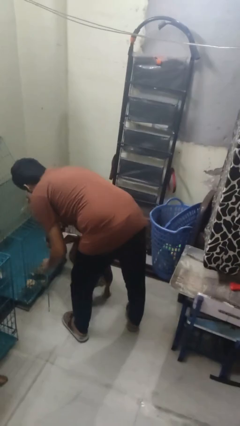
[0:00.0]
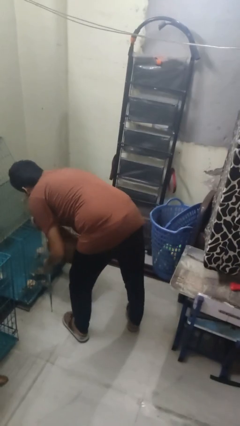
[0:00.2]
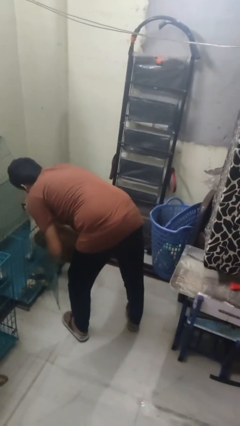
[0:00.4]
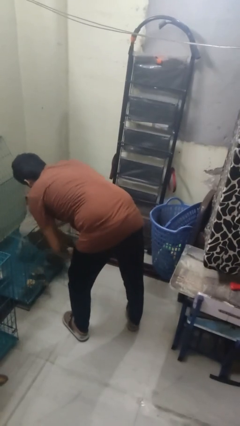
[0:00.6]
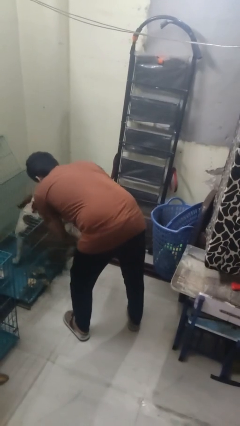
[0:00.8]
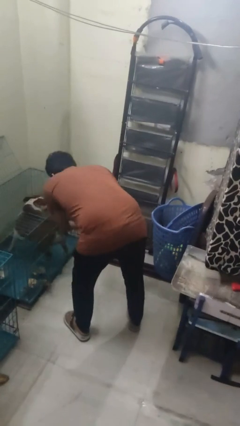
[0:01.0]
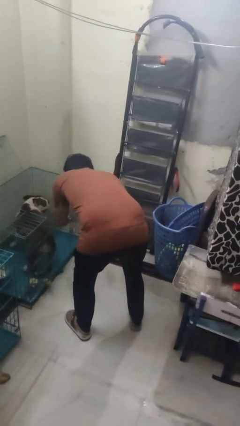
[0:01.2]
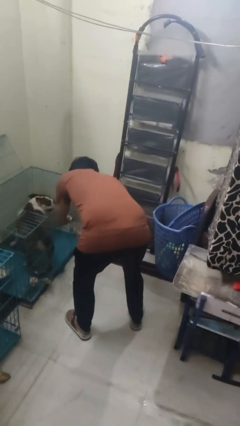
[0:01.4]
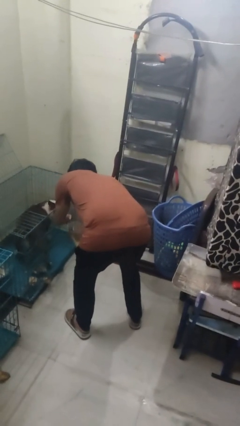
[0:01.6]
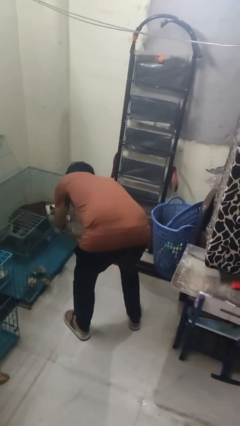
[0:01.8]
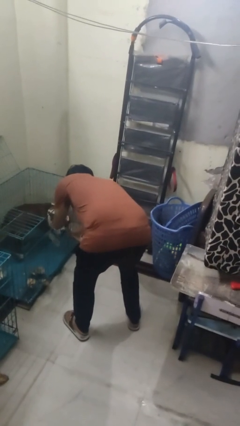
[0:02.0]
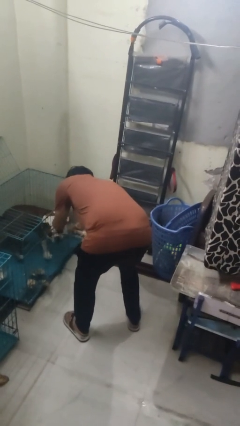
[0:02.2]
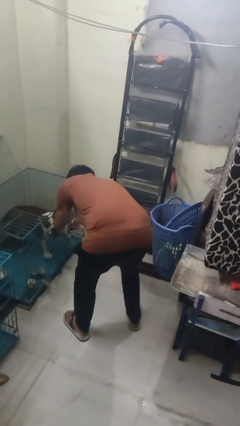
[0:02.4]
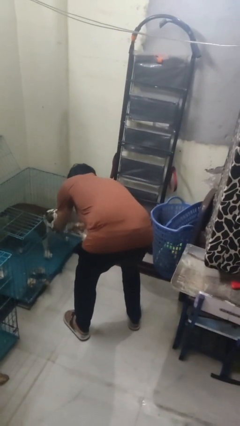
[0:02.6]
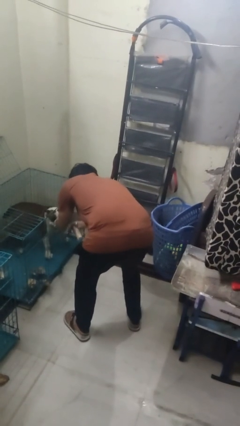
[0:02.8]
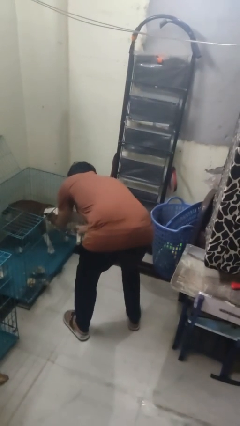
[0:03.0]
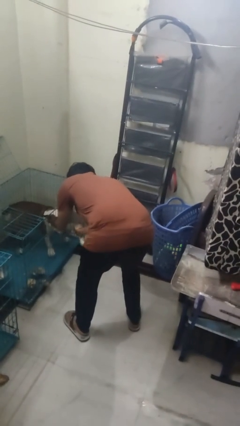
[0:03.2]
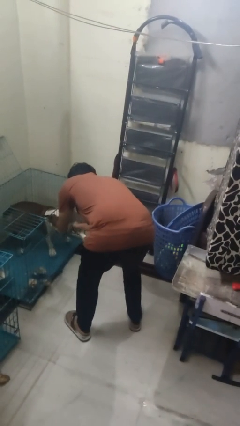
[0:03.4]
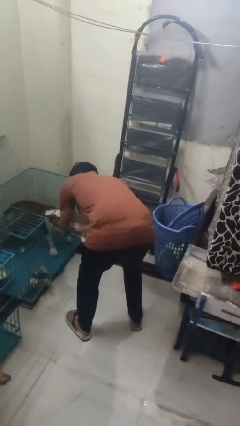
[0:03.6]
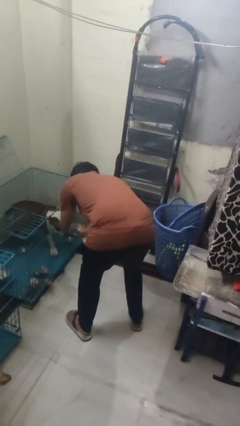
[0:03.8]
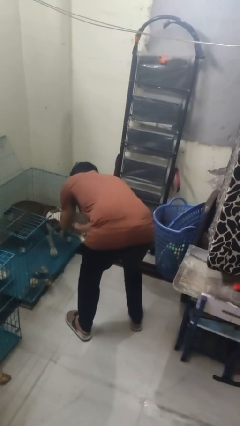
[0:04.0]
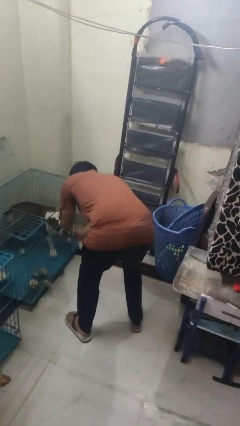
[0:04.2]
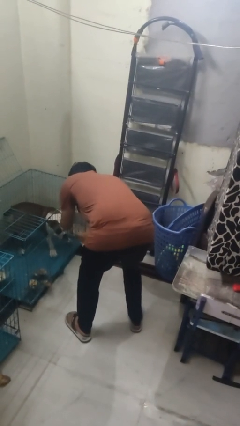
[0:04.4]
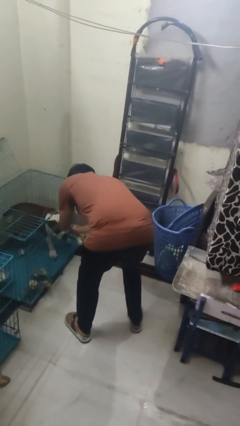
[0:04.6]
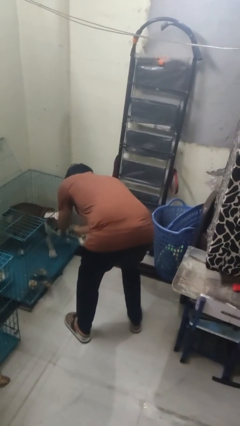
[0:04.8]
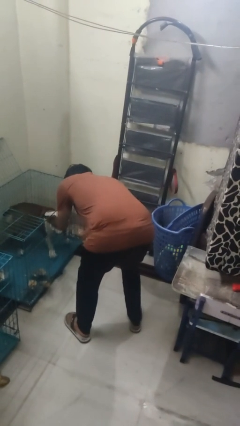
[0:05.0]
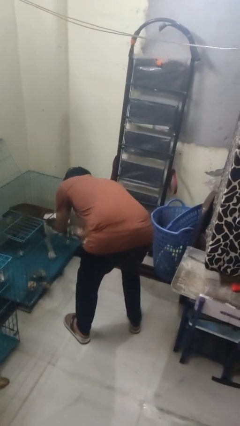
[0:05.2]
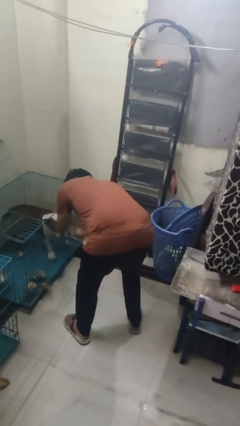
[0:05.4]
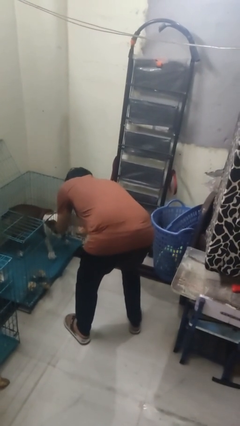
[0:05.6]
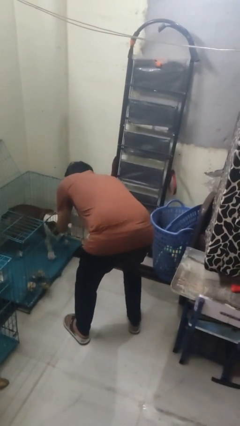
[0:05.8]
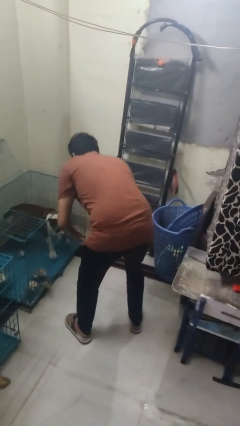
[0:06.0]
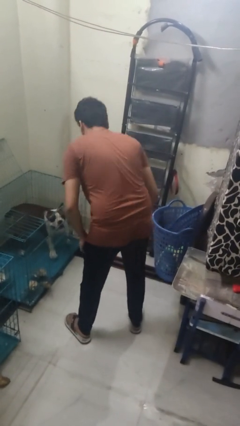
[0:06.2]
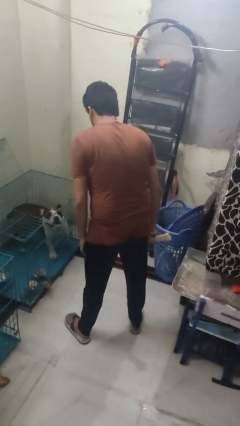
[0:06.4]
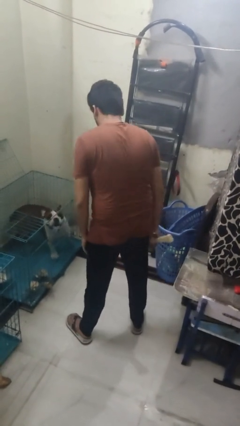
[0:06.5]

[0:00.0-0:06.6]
person crates dog

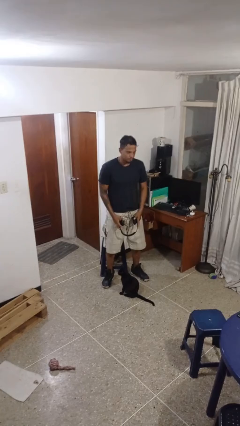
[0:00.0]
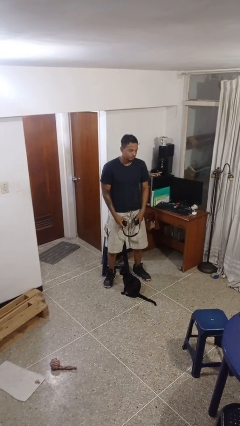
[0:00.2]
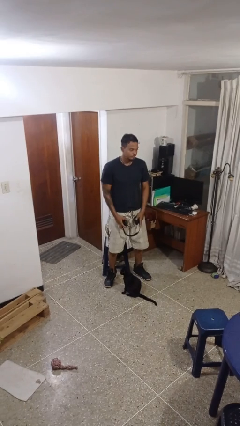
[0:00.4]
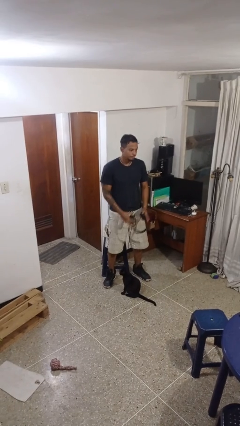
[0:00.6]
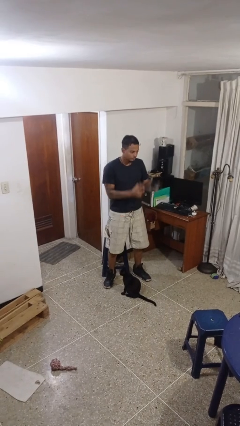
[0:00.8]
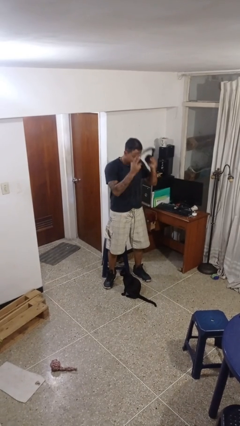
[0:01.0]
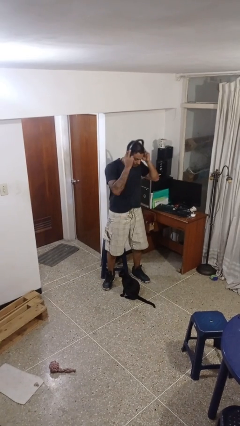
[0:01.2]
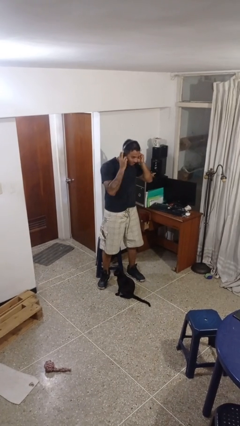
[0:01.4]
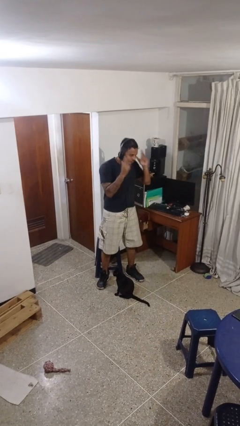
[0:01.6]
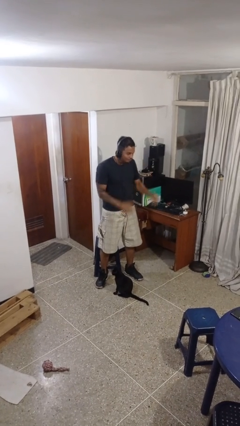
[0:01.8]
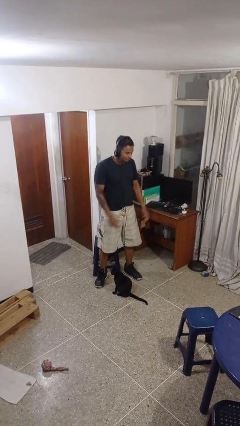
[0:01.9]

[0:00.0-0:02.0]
person puts on headphones

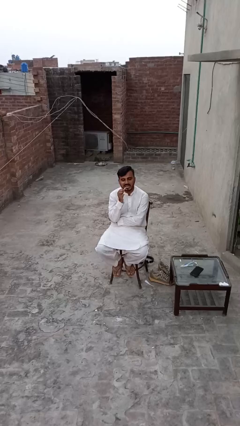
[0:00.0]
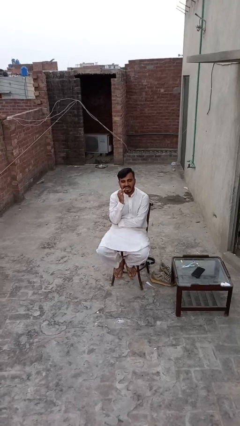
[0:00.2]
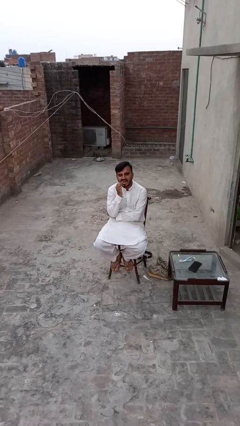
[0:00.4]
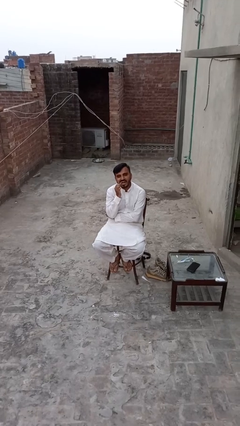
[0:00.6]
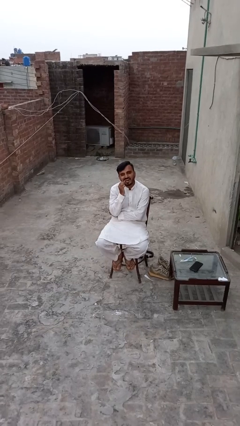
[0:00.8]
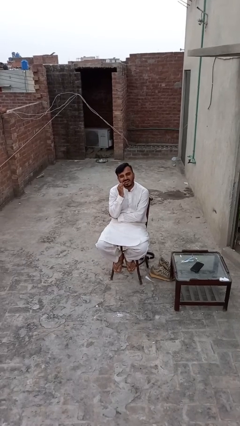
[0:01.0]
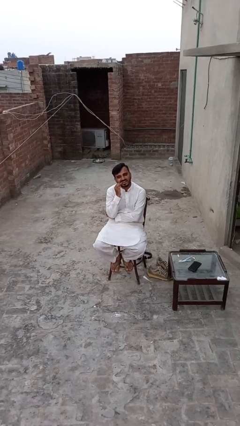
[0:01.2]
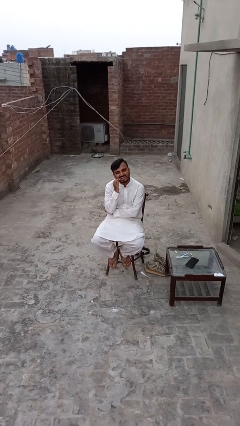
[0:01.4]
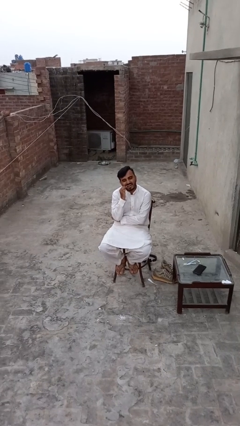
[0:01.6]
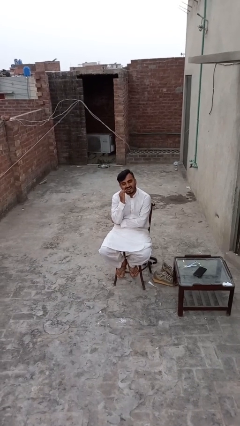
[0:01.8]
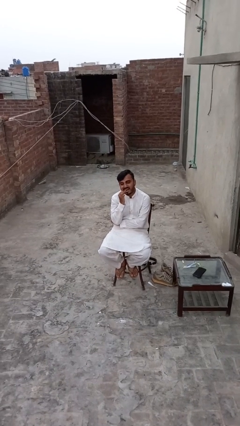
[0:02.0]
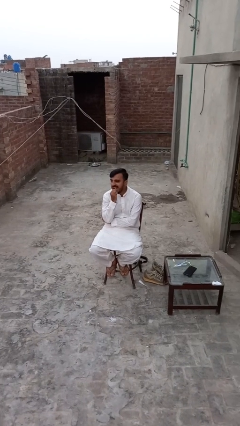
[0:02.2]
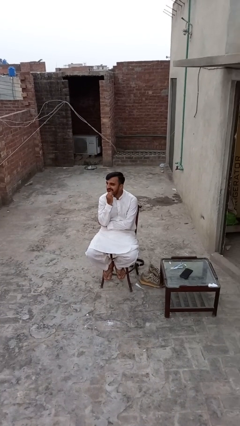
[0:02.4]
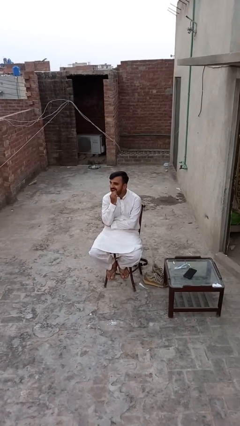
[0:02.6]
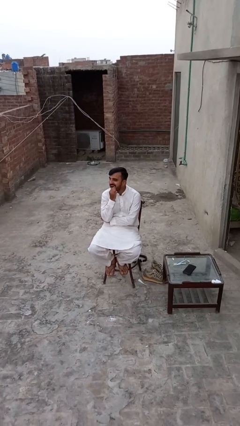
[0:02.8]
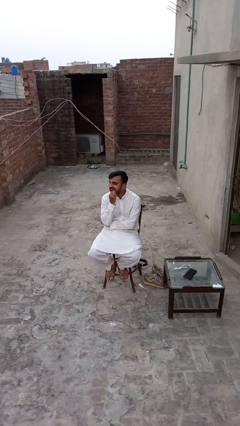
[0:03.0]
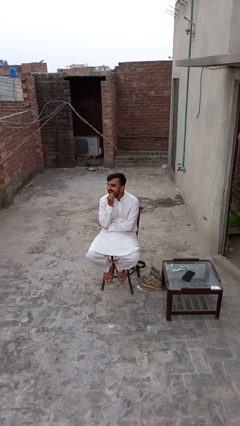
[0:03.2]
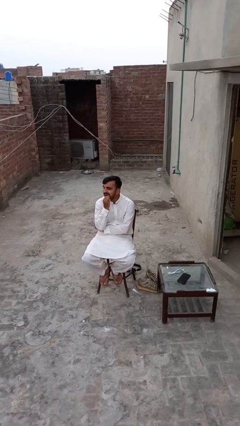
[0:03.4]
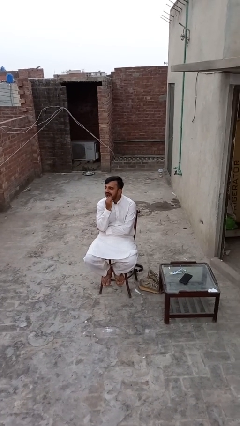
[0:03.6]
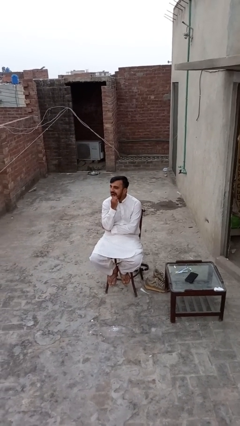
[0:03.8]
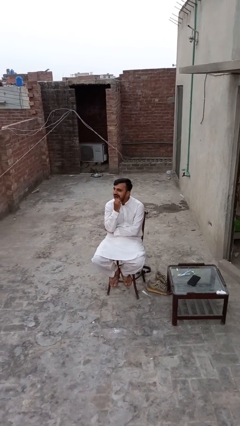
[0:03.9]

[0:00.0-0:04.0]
person flosses

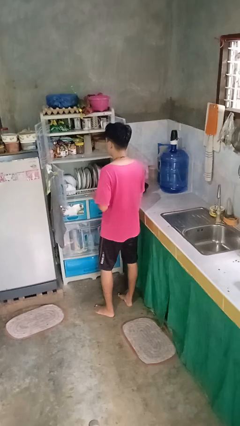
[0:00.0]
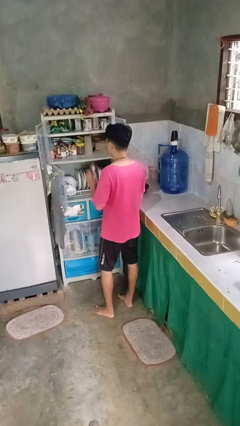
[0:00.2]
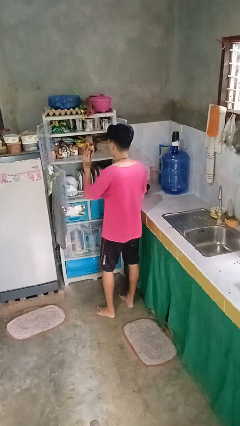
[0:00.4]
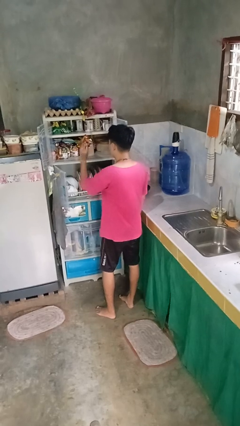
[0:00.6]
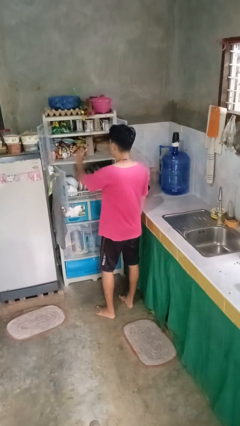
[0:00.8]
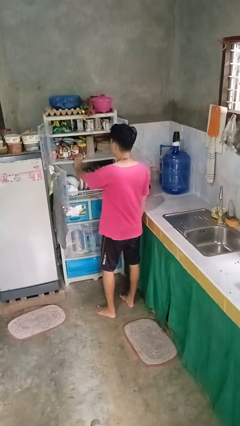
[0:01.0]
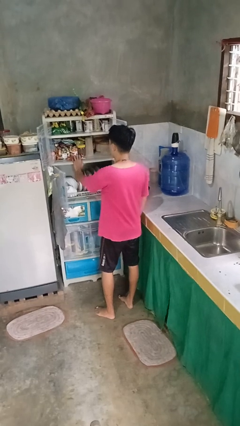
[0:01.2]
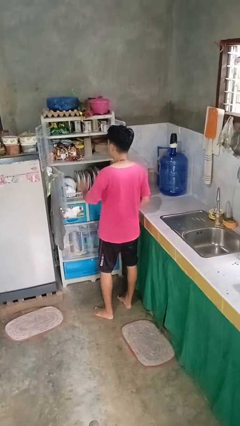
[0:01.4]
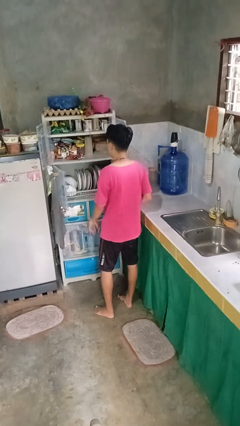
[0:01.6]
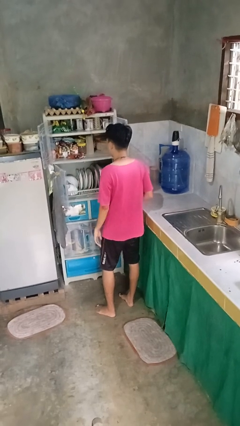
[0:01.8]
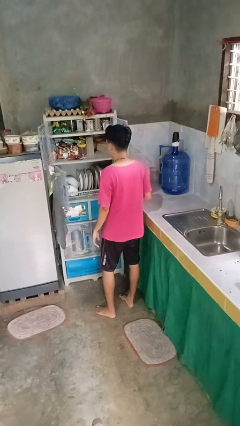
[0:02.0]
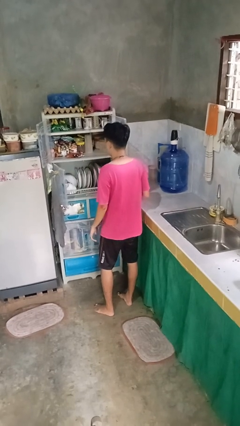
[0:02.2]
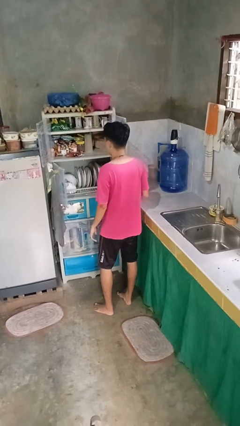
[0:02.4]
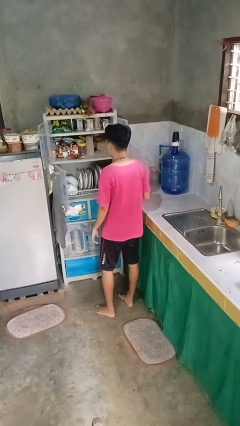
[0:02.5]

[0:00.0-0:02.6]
person puts object in cabinet

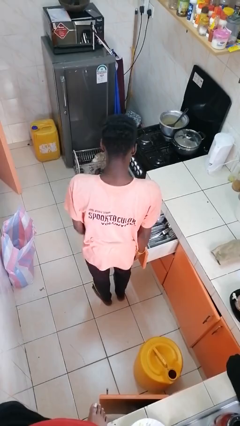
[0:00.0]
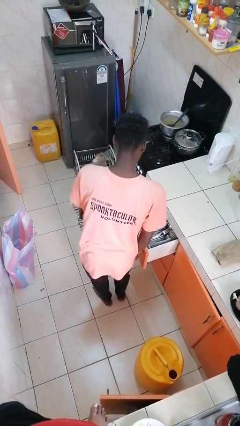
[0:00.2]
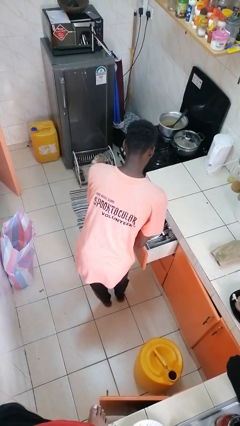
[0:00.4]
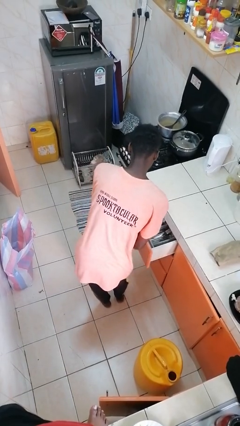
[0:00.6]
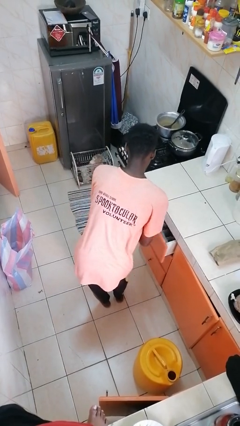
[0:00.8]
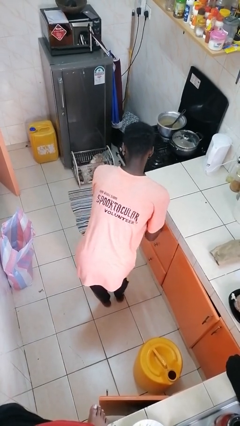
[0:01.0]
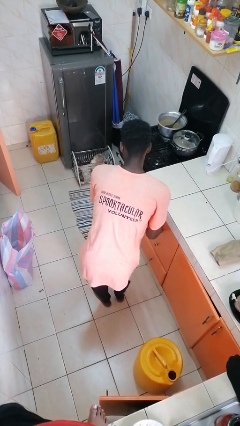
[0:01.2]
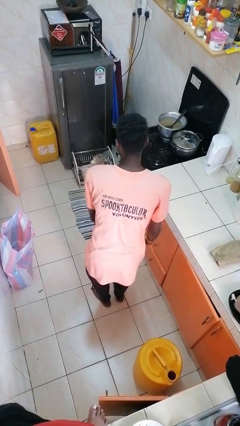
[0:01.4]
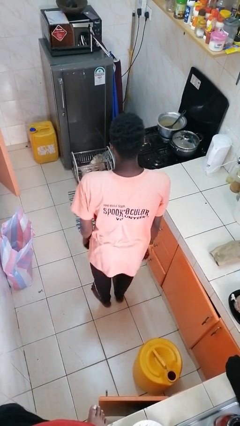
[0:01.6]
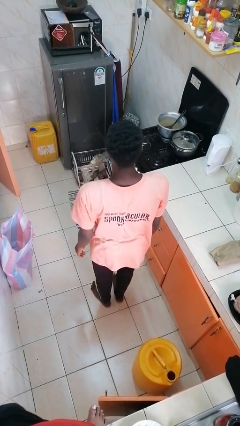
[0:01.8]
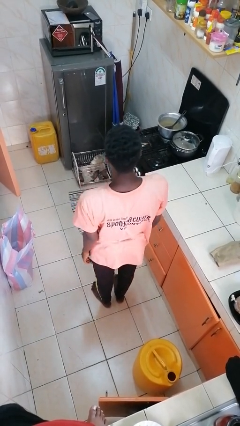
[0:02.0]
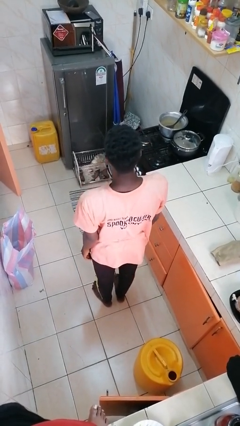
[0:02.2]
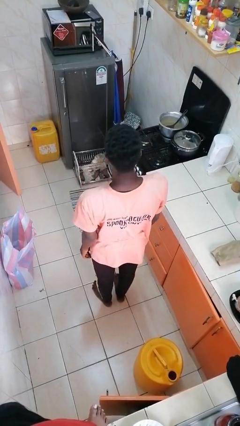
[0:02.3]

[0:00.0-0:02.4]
person closes kitchen drawer
